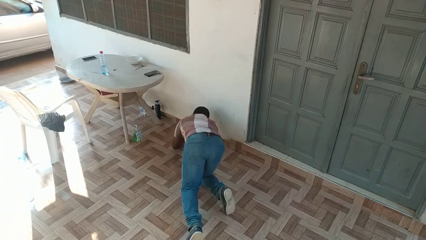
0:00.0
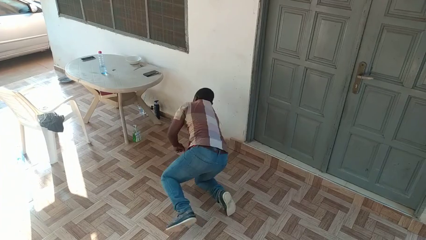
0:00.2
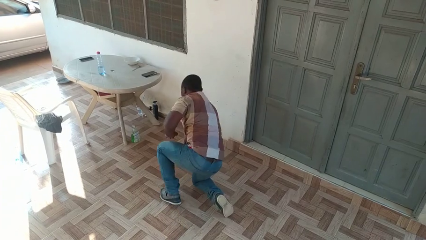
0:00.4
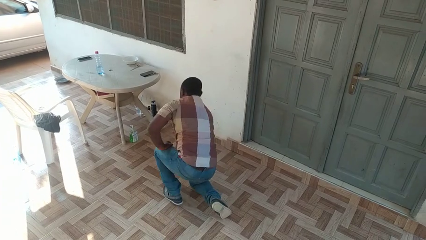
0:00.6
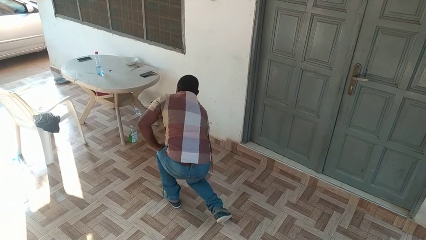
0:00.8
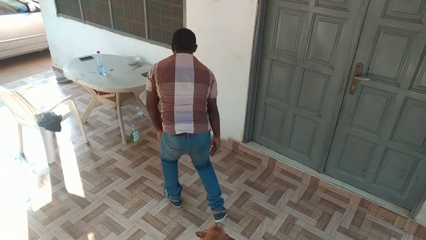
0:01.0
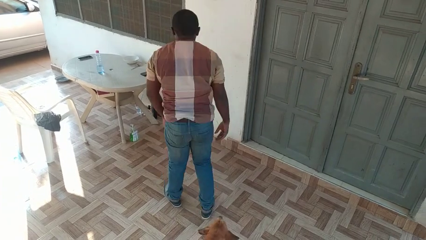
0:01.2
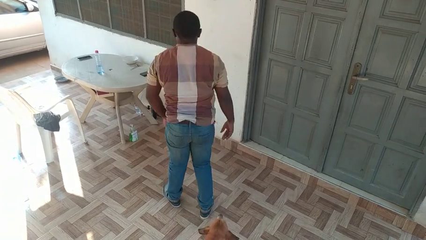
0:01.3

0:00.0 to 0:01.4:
person stands up from floor

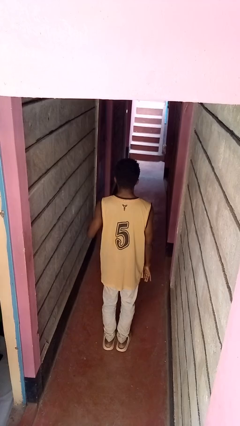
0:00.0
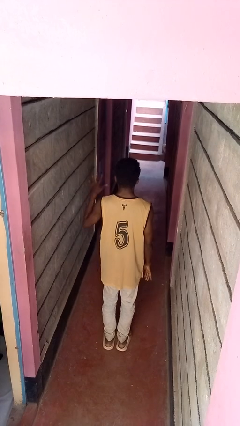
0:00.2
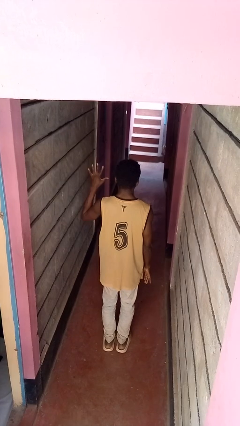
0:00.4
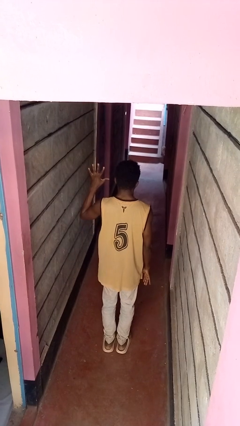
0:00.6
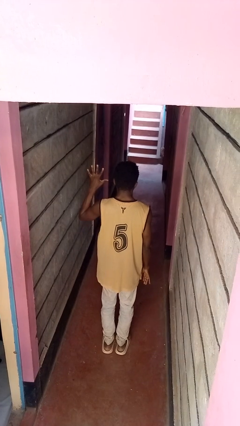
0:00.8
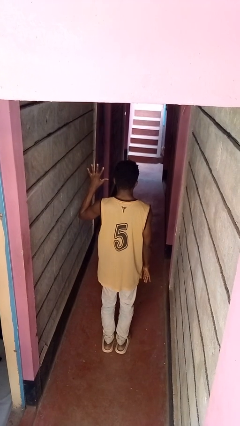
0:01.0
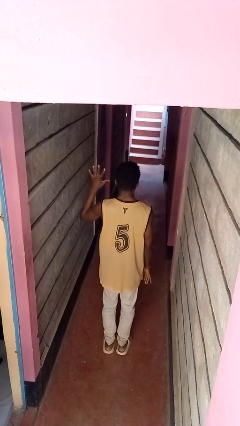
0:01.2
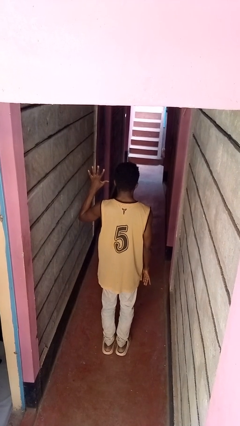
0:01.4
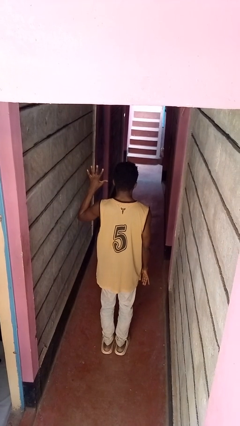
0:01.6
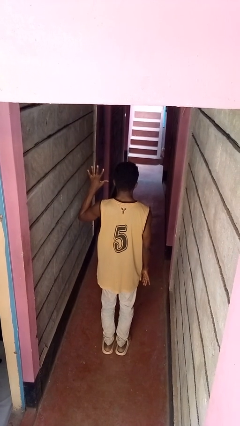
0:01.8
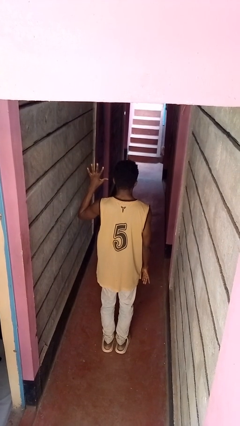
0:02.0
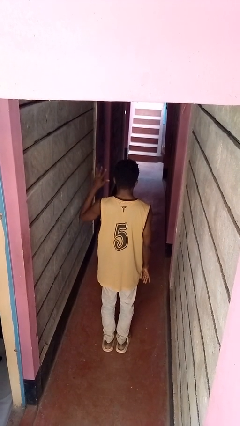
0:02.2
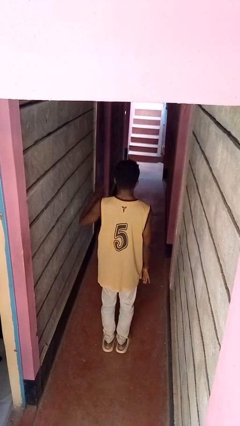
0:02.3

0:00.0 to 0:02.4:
person gestures number five

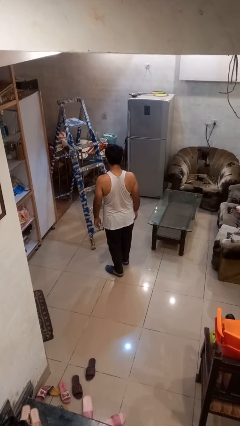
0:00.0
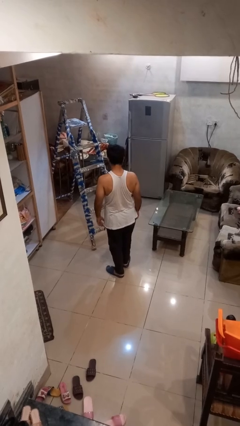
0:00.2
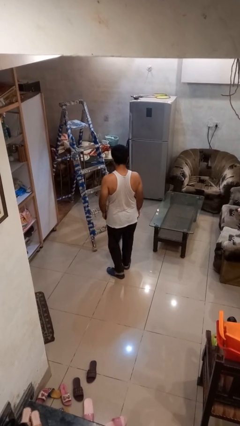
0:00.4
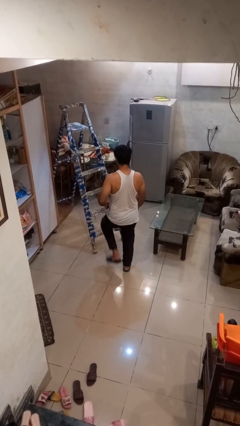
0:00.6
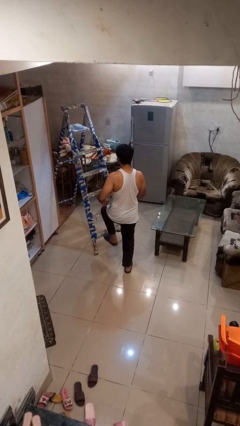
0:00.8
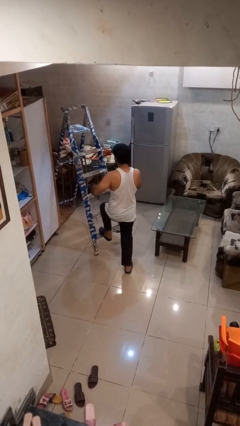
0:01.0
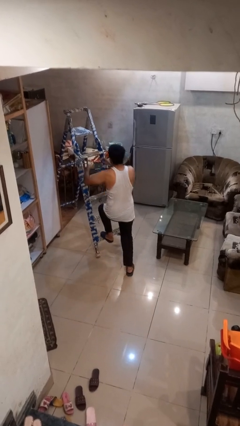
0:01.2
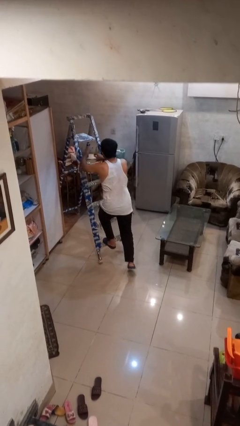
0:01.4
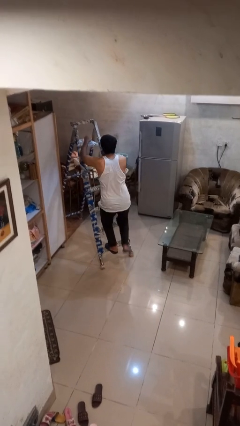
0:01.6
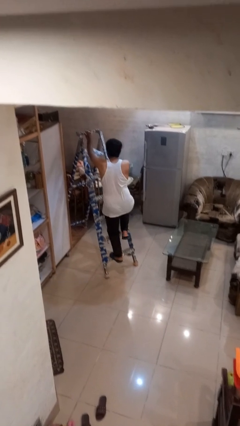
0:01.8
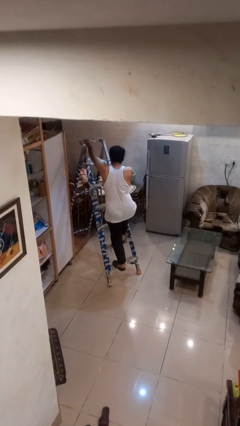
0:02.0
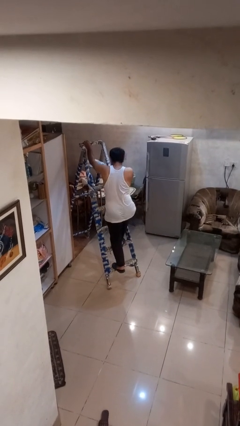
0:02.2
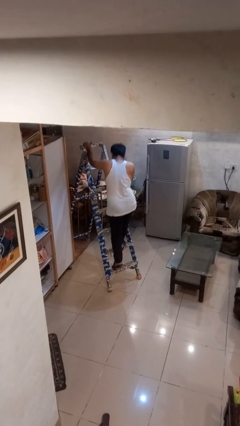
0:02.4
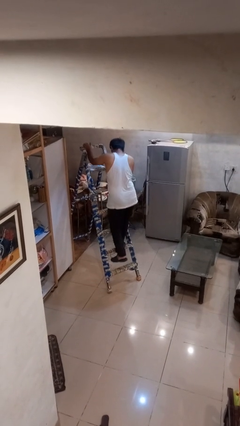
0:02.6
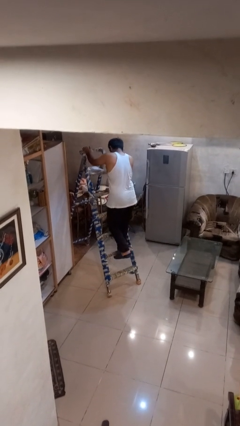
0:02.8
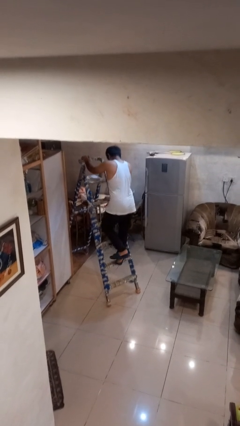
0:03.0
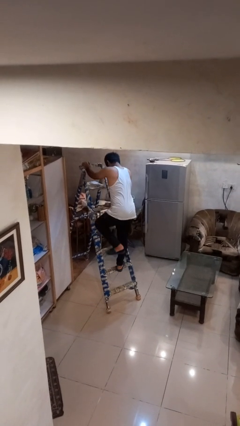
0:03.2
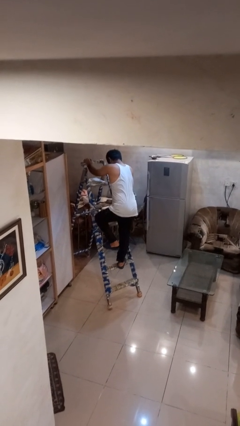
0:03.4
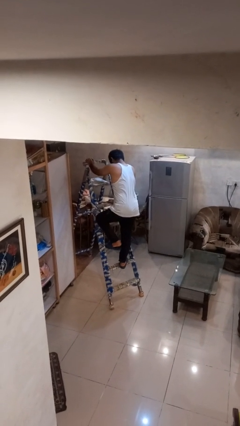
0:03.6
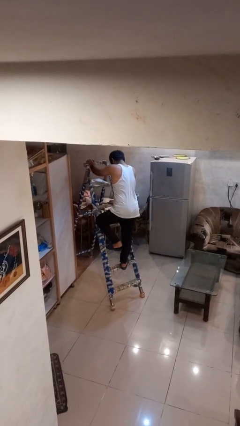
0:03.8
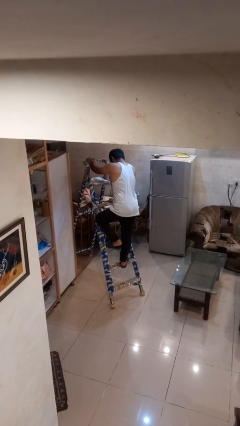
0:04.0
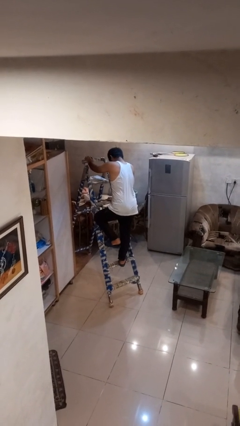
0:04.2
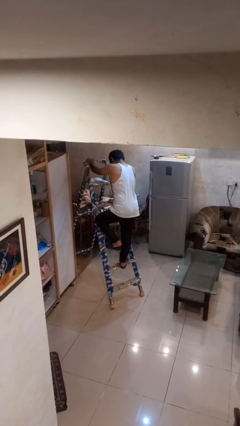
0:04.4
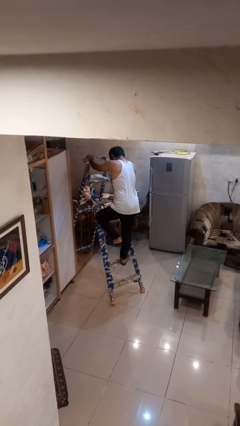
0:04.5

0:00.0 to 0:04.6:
person climbs up ladder

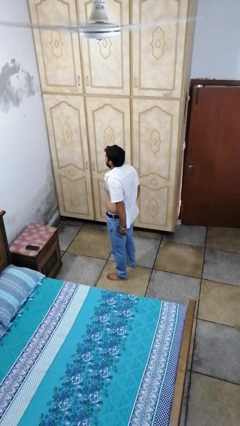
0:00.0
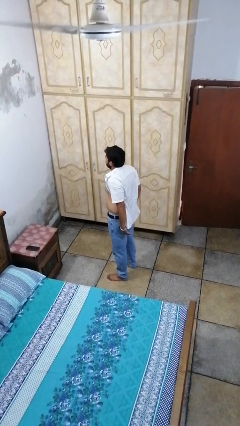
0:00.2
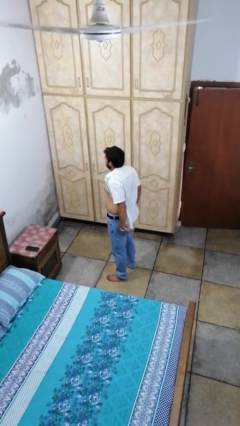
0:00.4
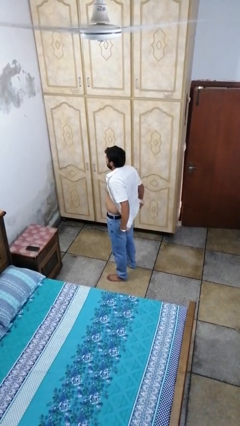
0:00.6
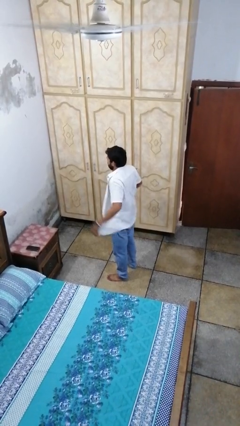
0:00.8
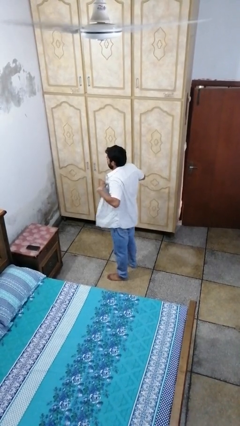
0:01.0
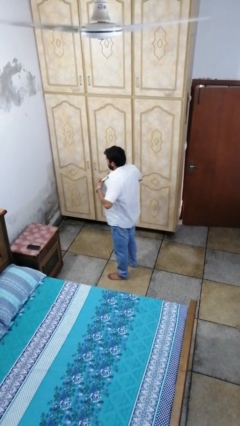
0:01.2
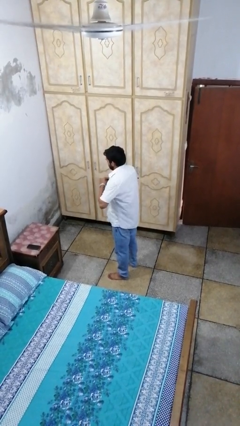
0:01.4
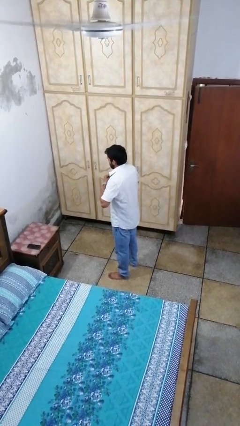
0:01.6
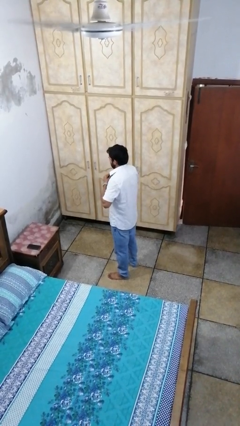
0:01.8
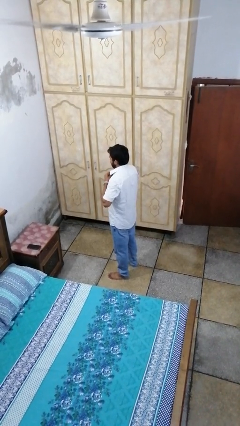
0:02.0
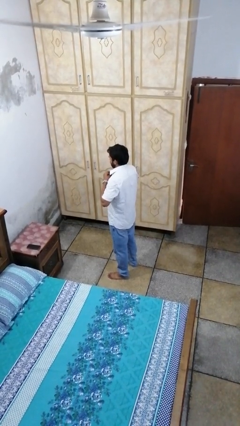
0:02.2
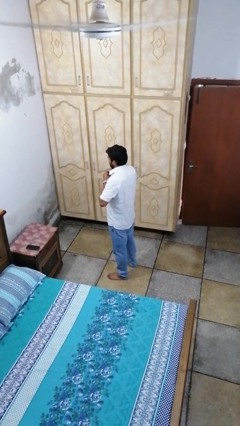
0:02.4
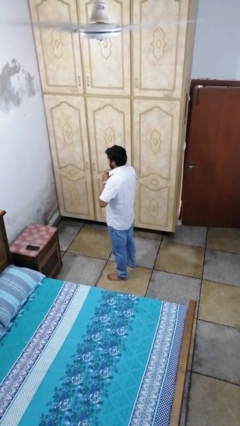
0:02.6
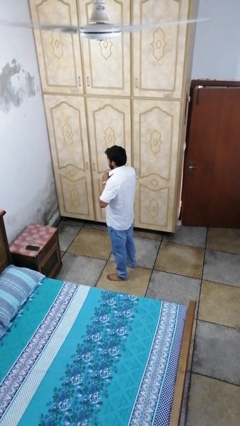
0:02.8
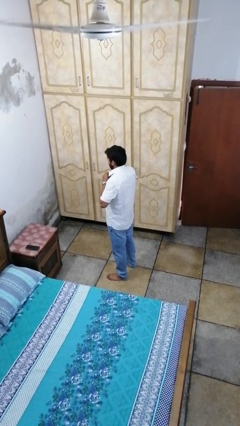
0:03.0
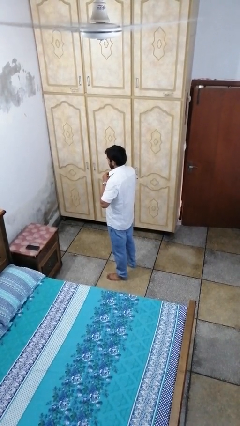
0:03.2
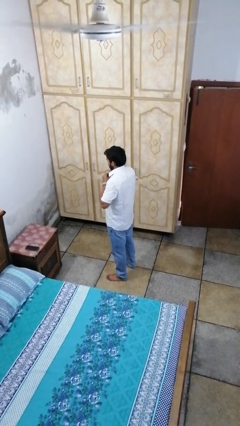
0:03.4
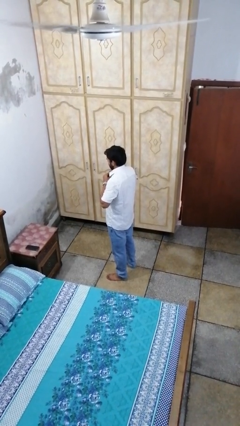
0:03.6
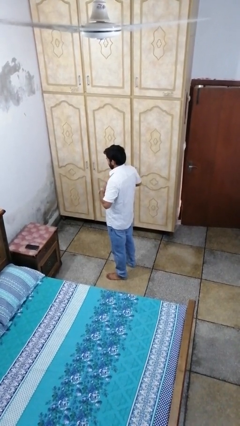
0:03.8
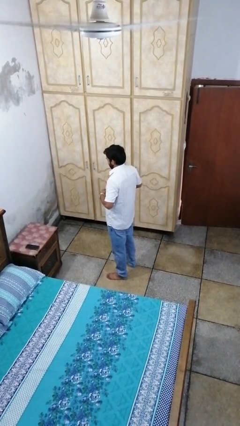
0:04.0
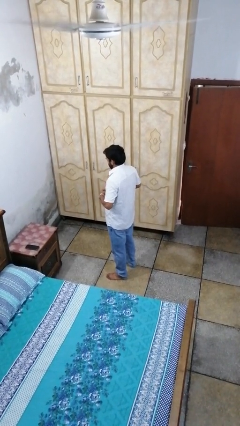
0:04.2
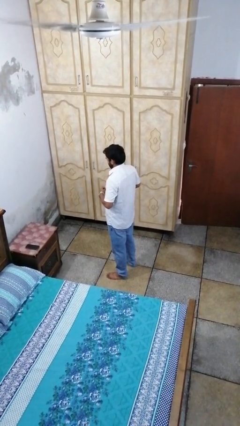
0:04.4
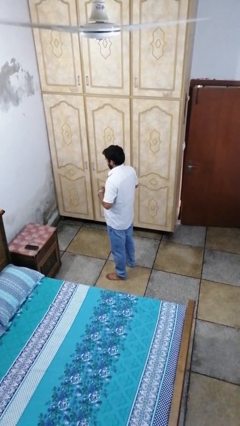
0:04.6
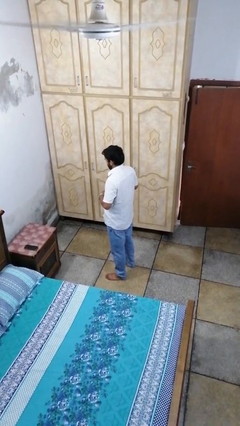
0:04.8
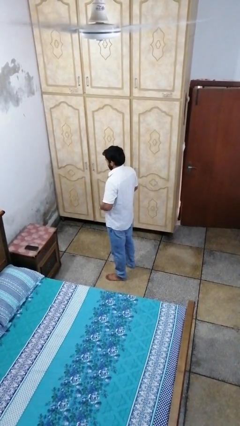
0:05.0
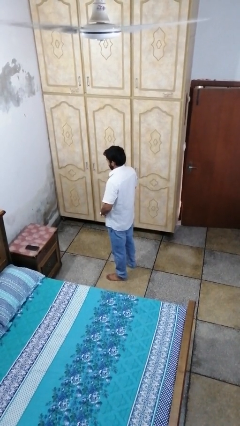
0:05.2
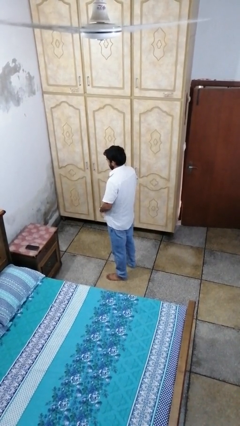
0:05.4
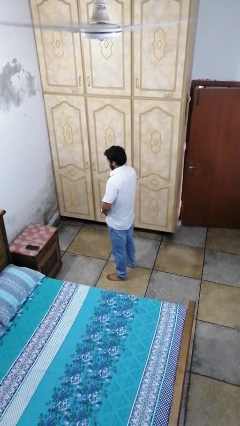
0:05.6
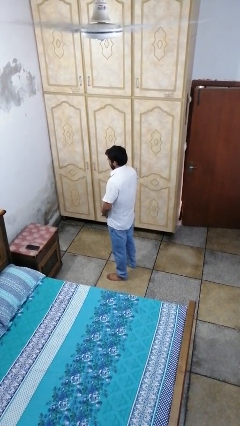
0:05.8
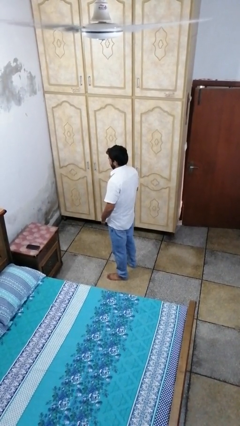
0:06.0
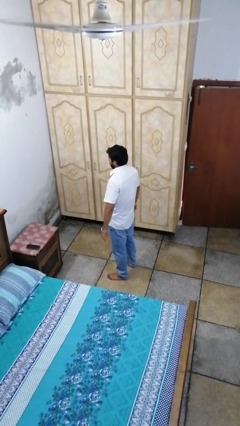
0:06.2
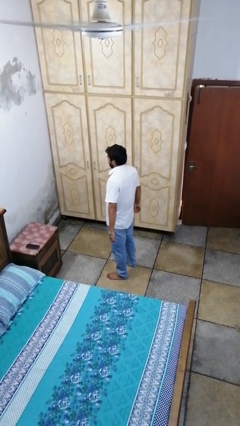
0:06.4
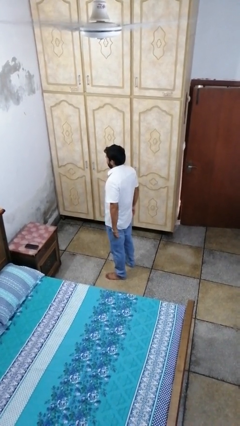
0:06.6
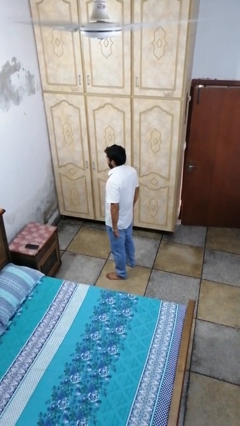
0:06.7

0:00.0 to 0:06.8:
person buttons shirt

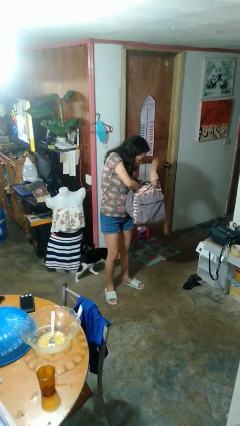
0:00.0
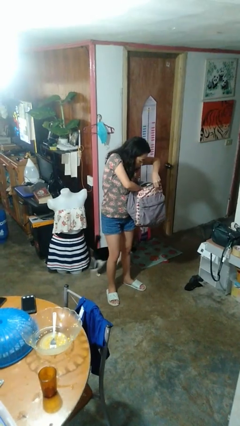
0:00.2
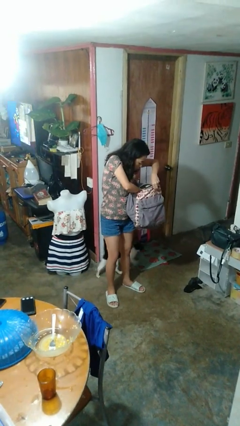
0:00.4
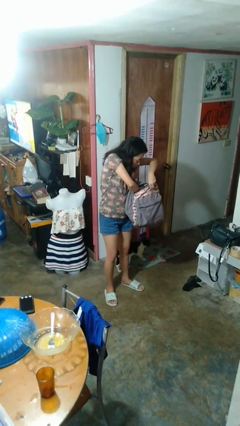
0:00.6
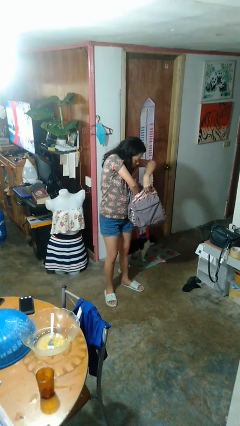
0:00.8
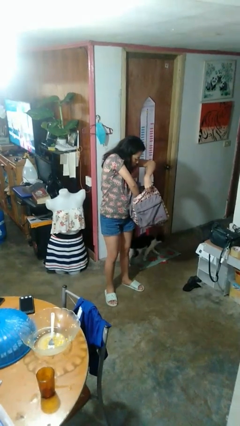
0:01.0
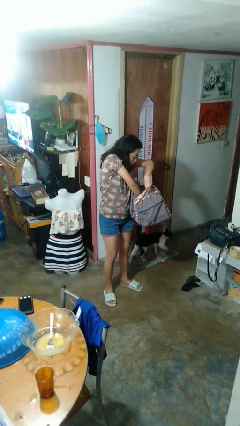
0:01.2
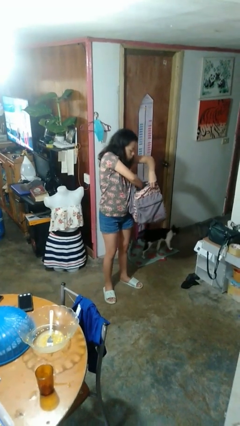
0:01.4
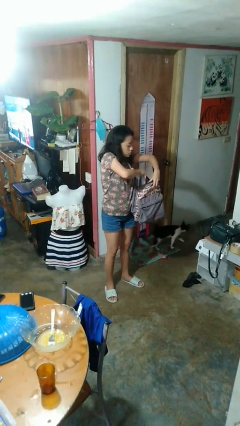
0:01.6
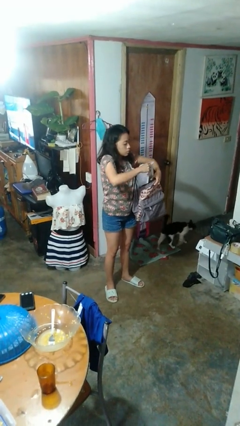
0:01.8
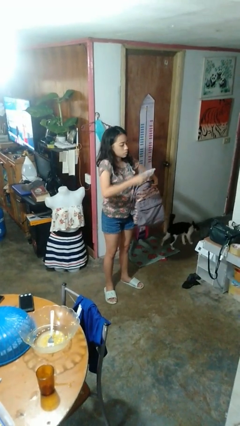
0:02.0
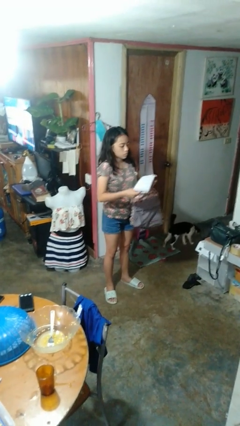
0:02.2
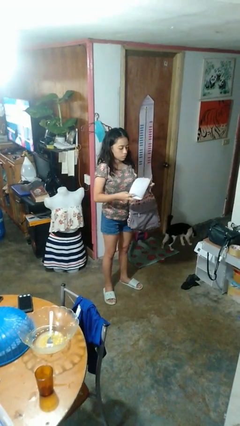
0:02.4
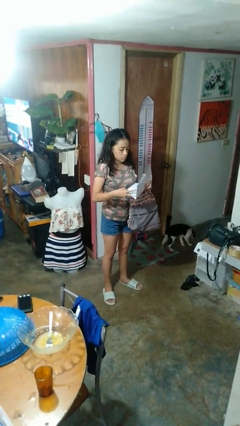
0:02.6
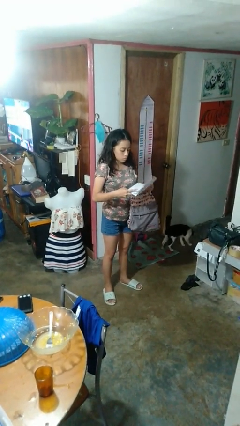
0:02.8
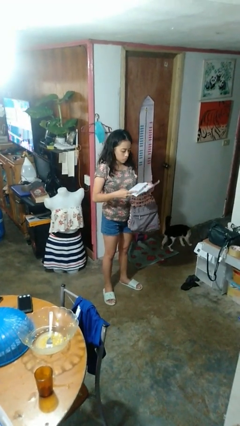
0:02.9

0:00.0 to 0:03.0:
person takes object from backpack
